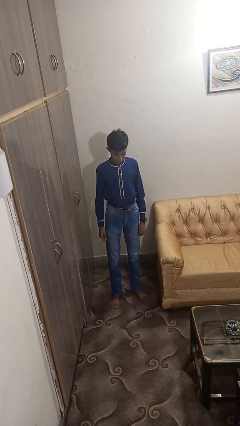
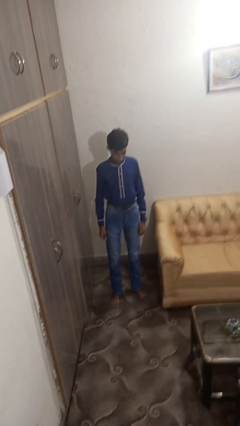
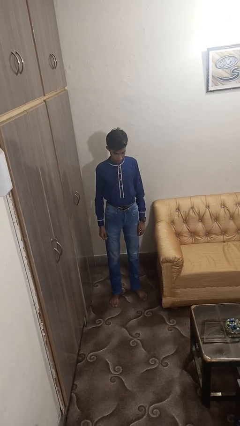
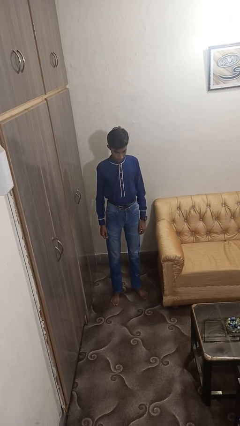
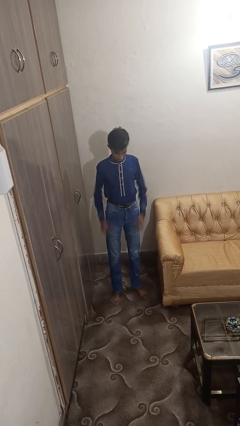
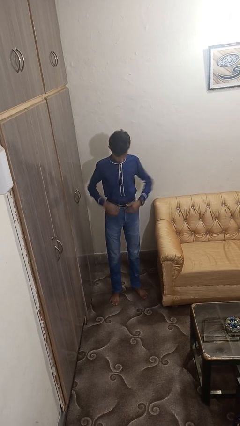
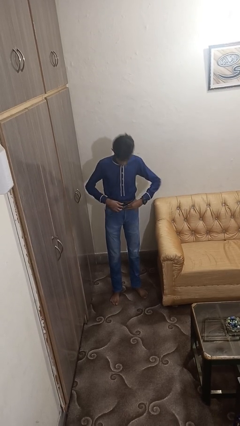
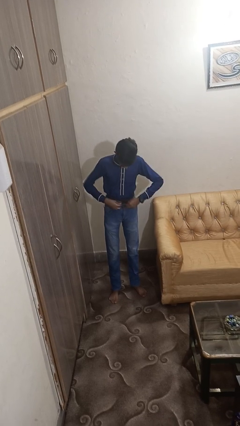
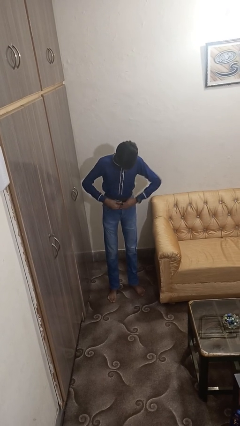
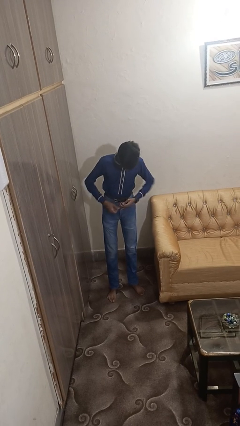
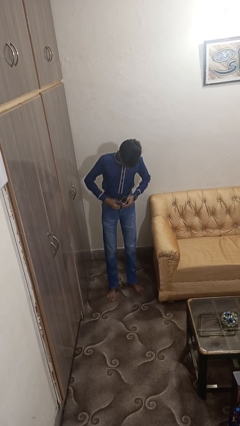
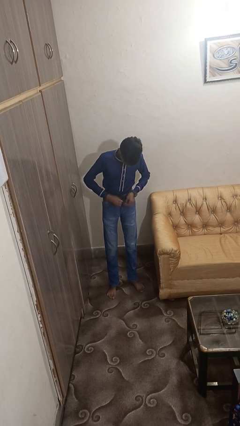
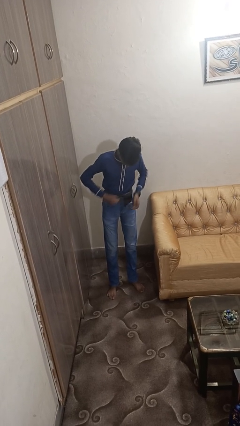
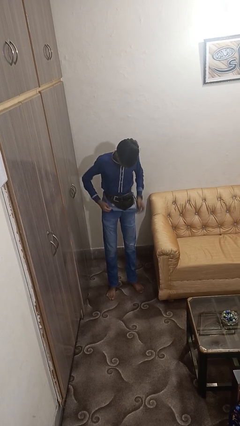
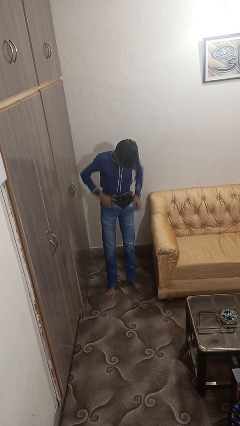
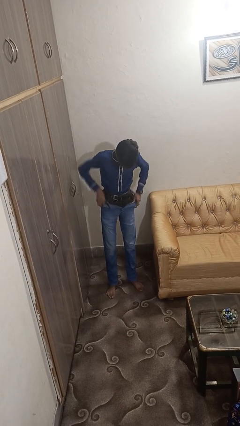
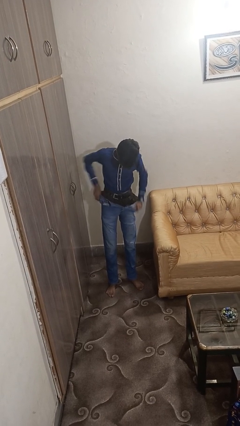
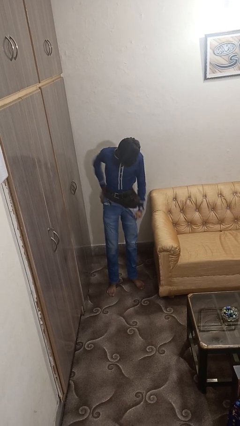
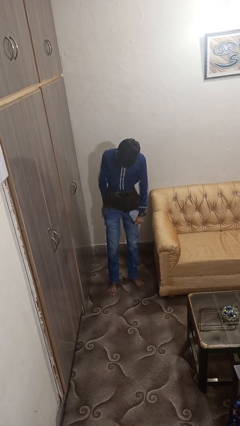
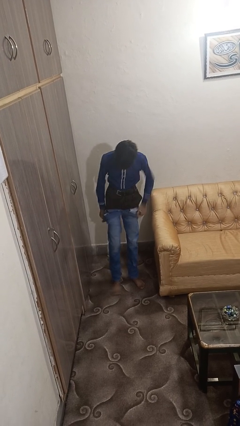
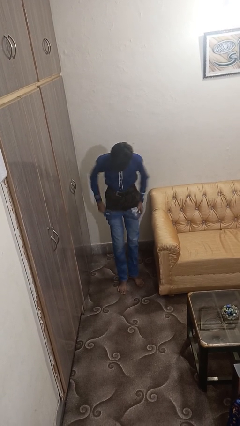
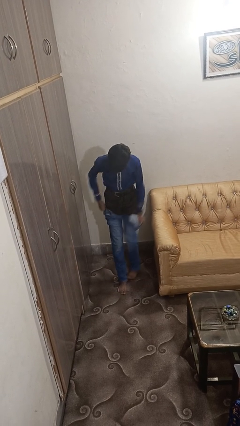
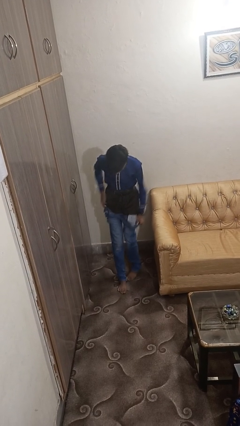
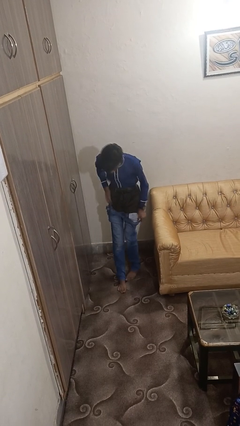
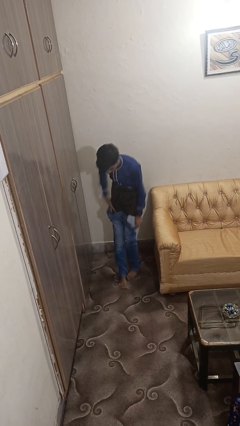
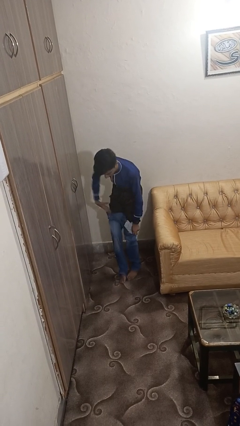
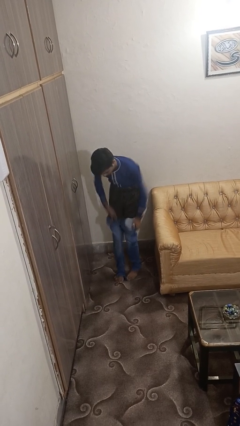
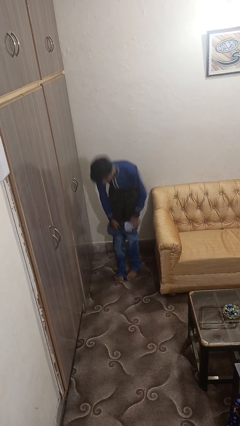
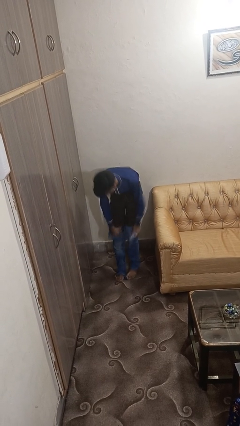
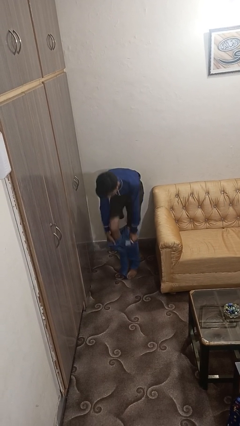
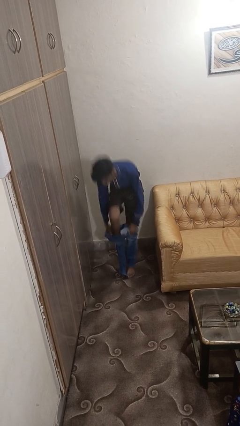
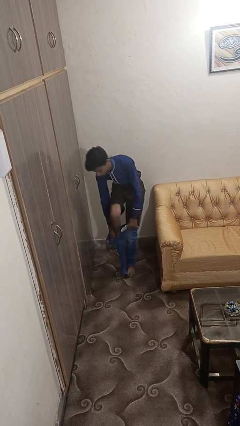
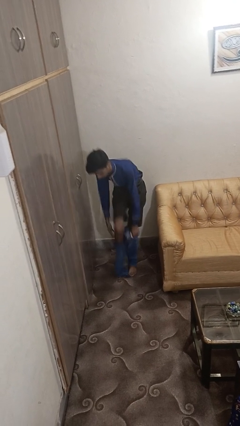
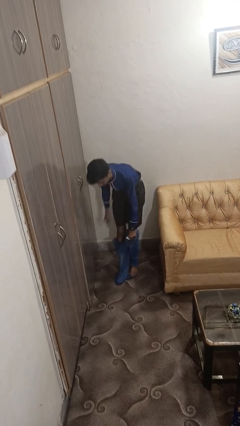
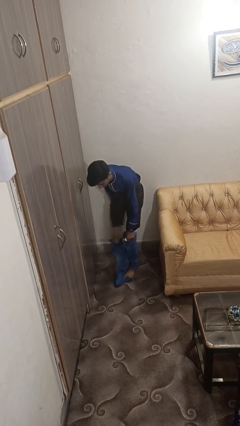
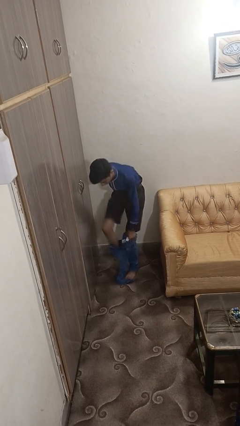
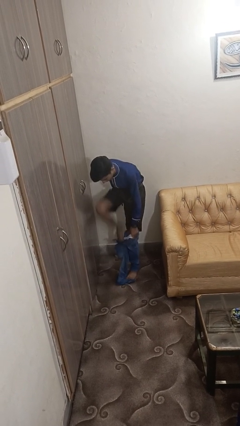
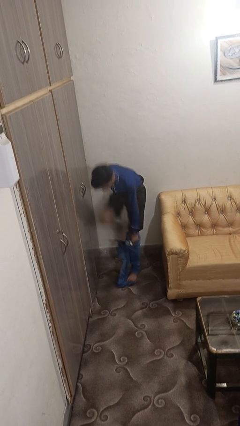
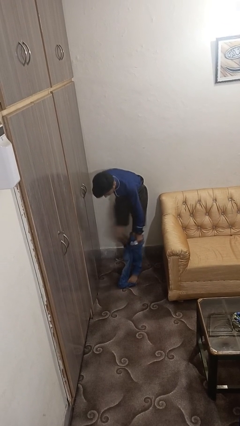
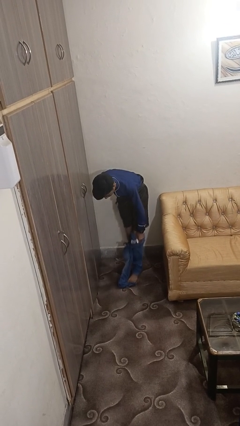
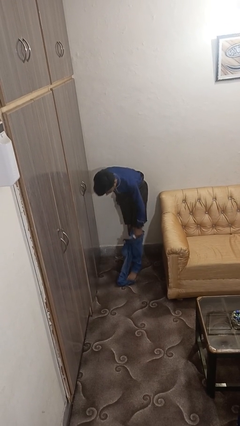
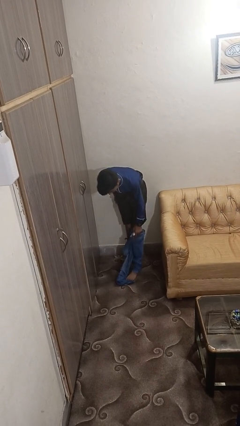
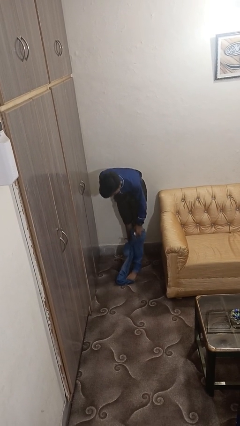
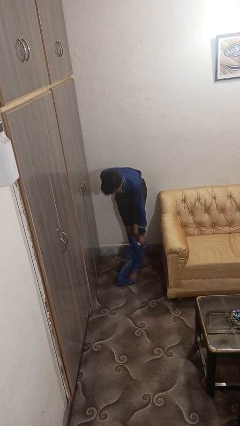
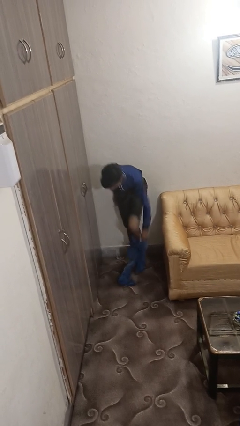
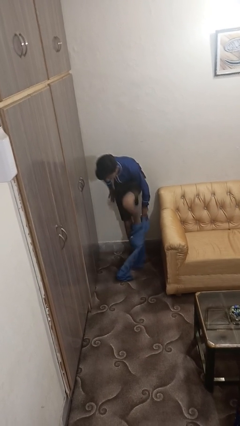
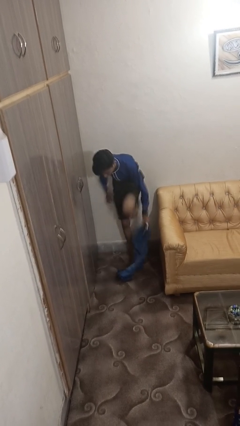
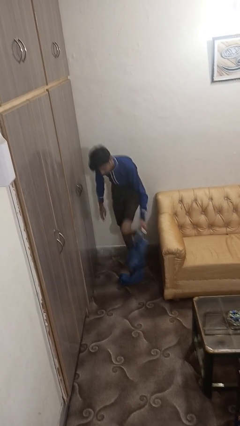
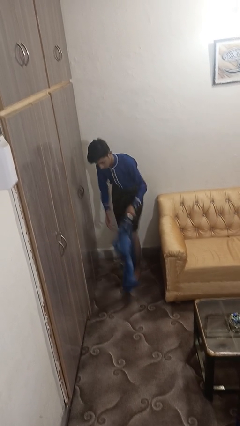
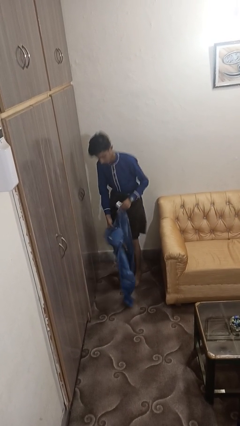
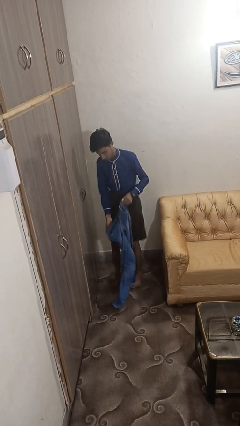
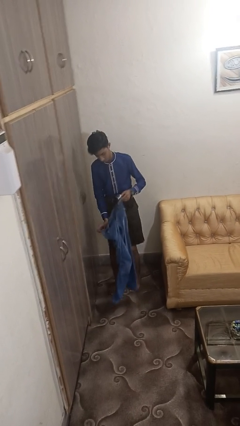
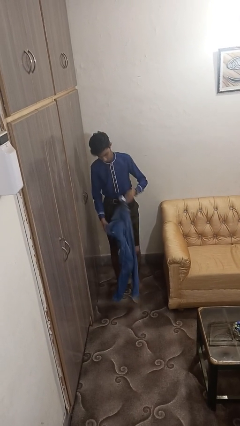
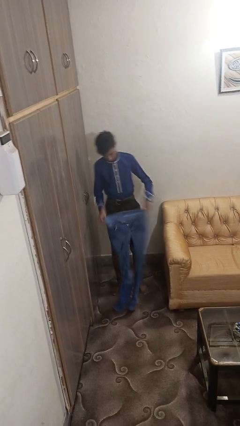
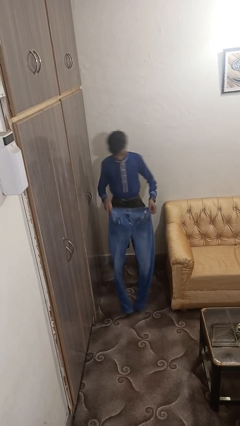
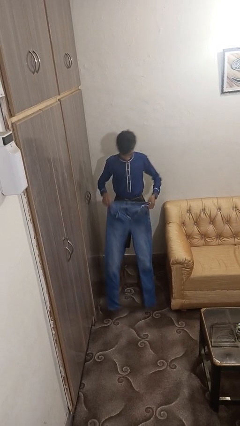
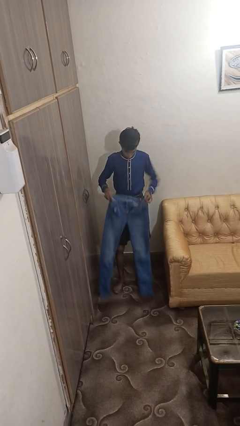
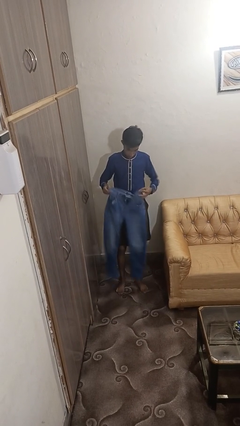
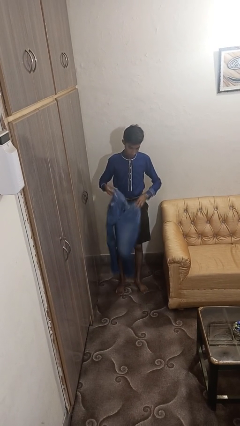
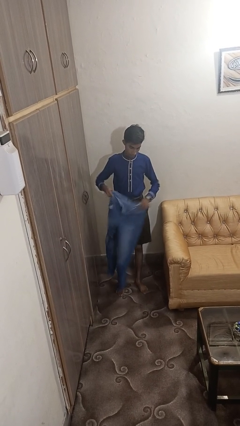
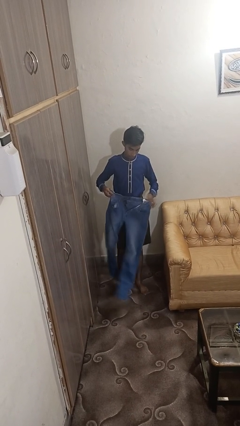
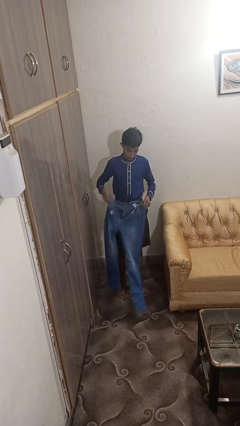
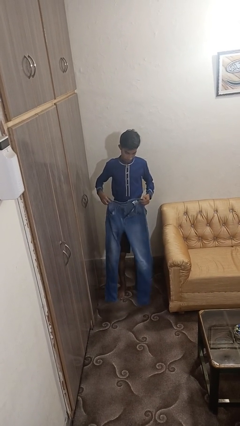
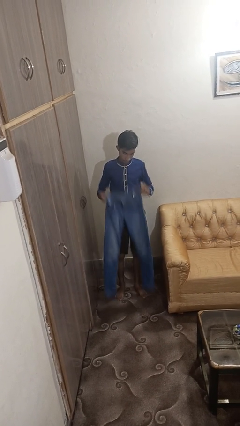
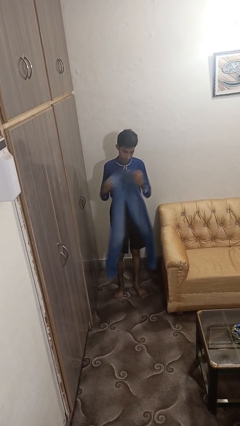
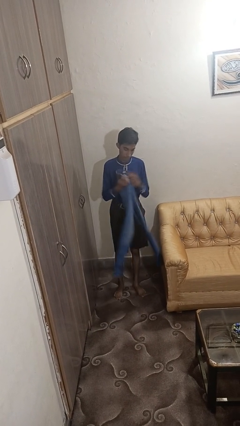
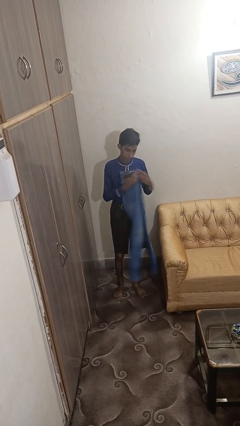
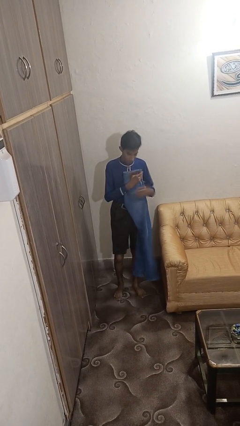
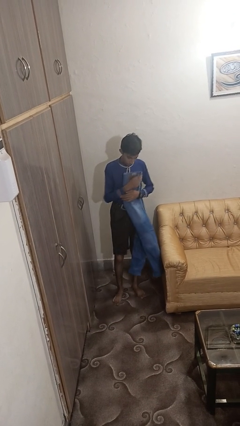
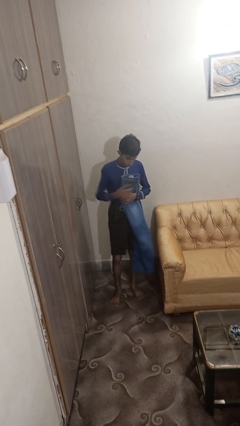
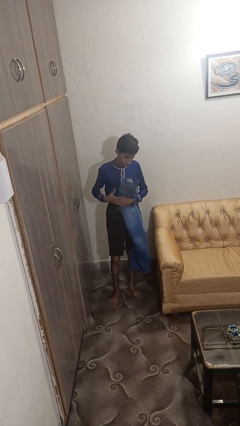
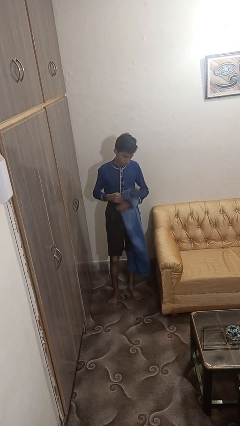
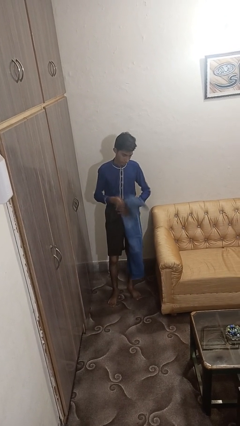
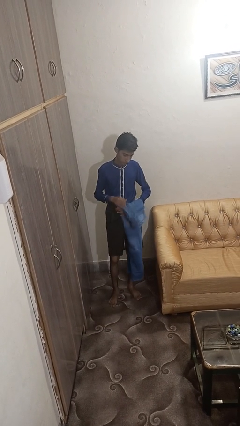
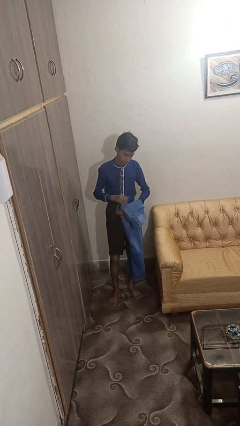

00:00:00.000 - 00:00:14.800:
person takes off pants

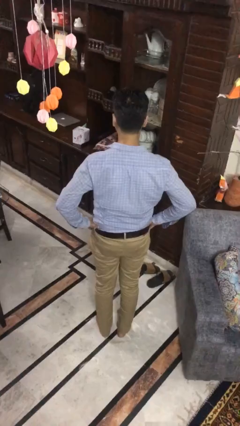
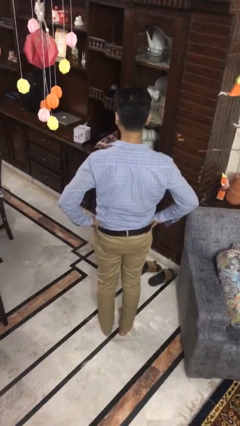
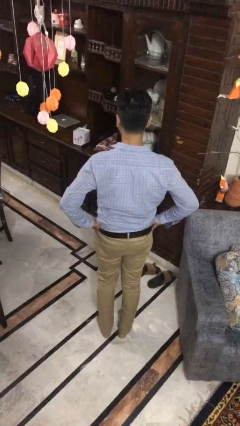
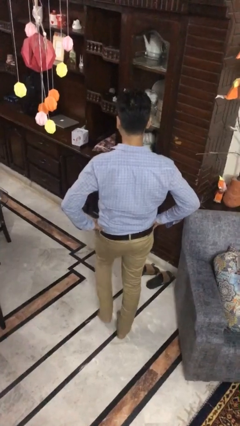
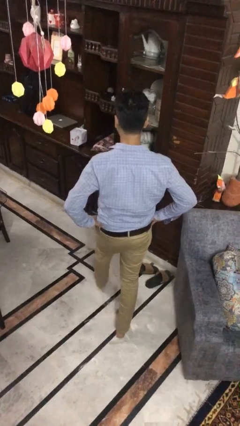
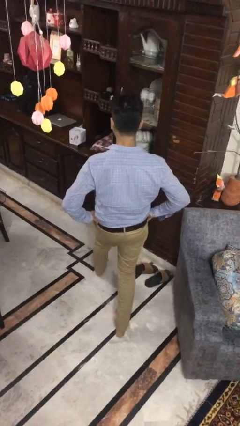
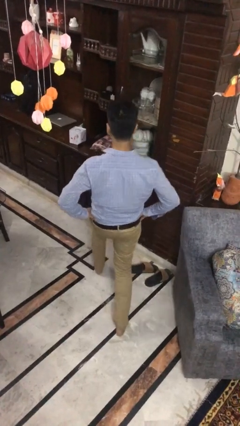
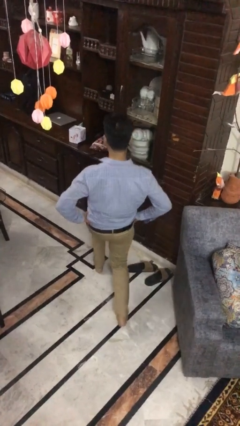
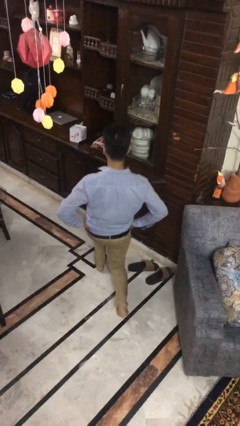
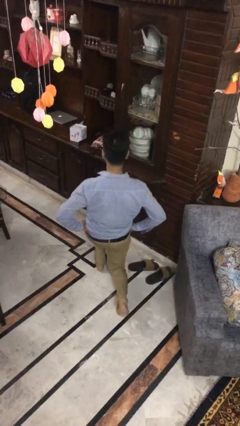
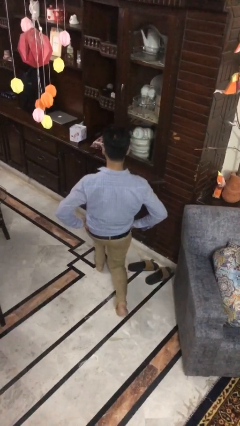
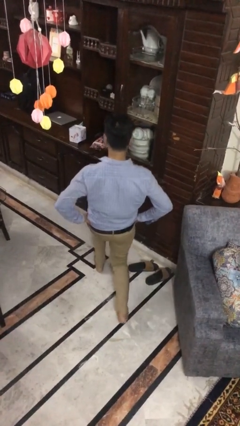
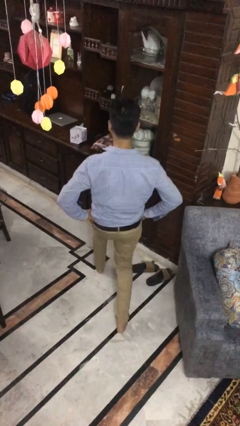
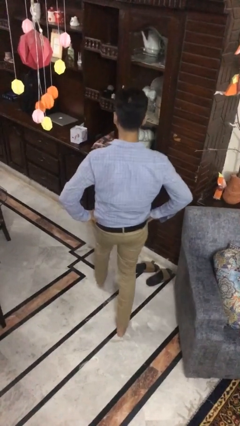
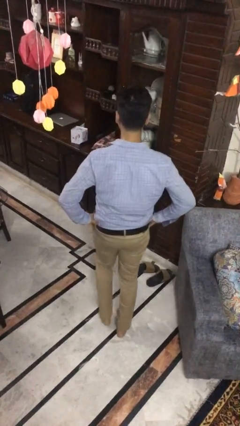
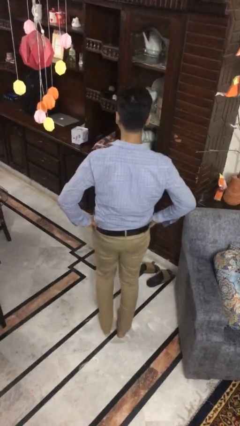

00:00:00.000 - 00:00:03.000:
person exercises with lunges

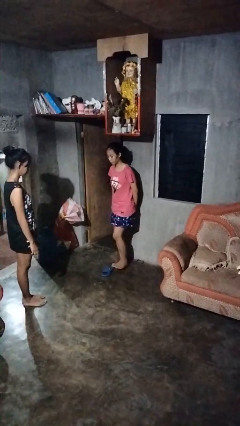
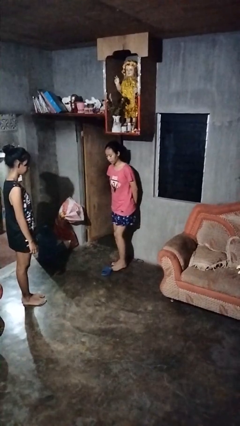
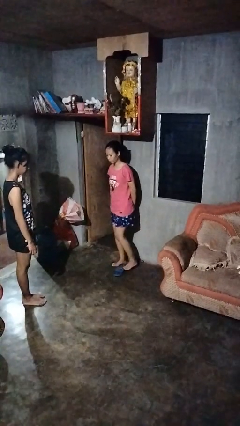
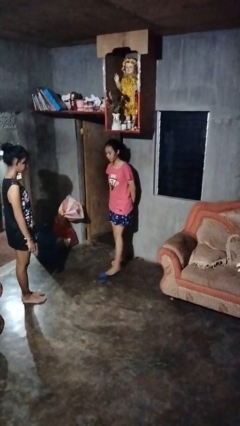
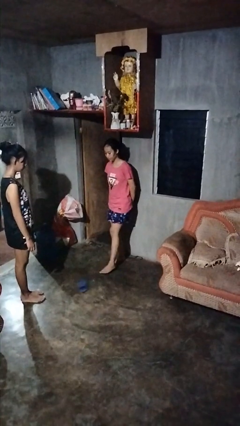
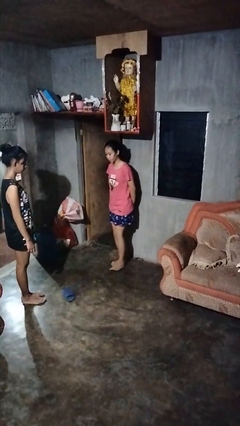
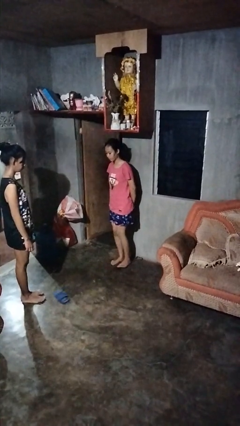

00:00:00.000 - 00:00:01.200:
person kicks object to person
